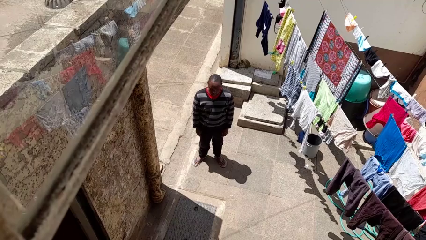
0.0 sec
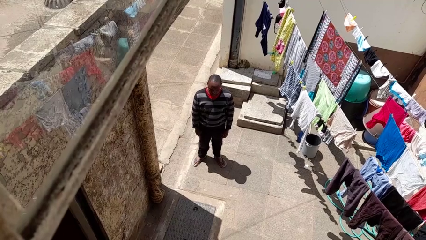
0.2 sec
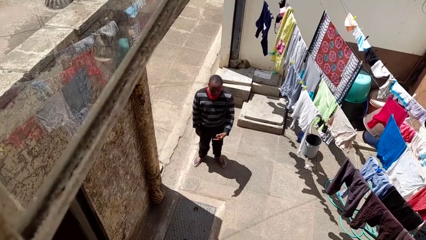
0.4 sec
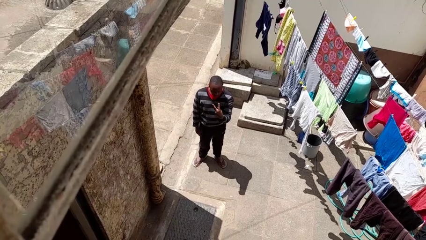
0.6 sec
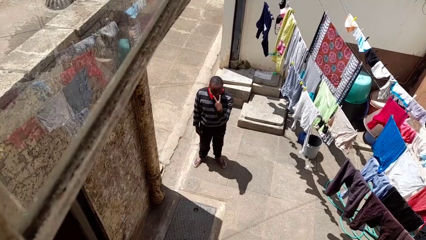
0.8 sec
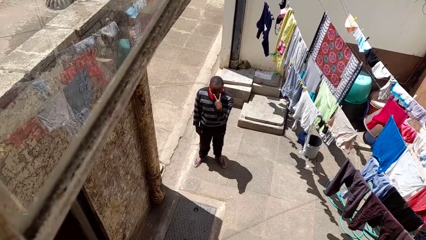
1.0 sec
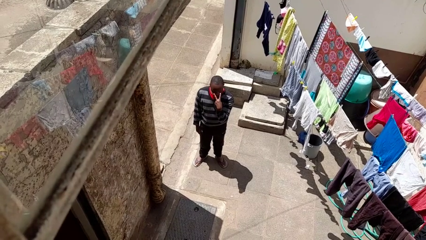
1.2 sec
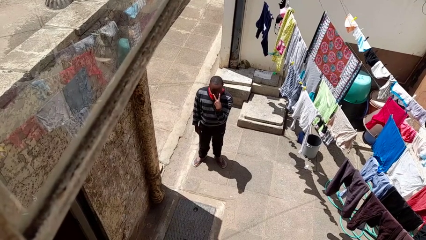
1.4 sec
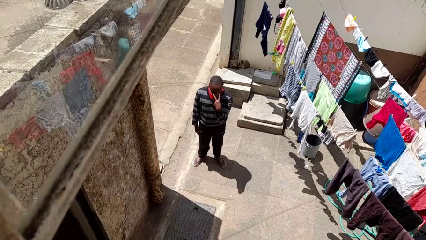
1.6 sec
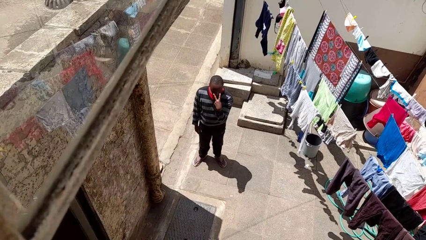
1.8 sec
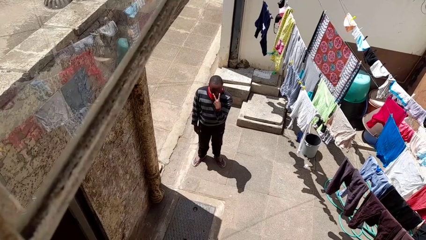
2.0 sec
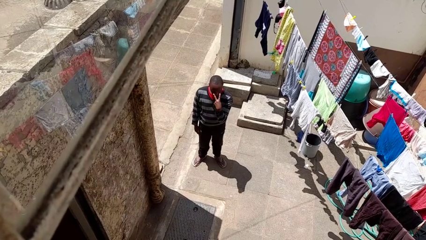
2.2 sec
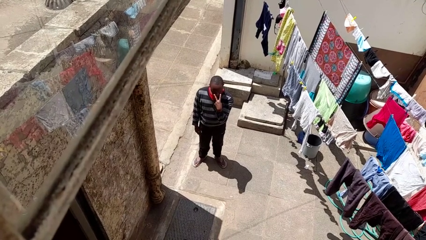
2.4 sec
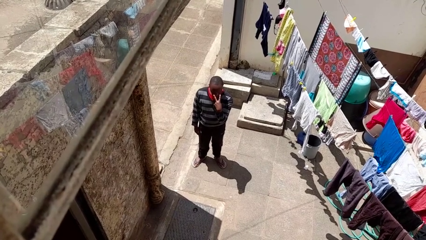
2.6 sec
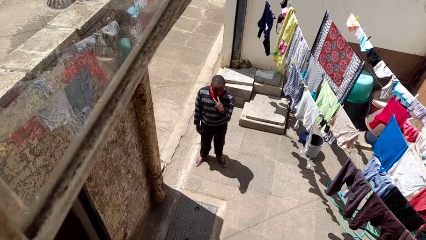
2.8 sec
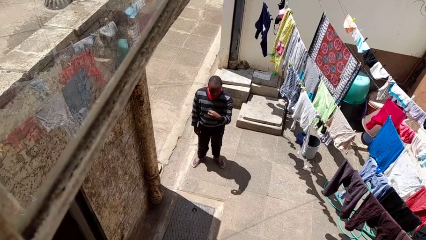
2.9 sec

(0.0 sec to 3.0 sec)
person gestures watch closely

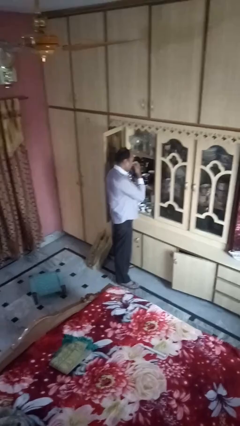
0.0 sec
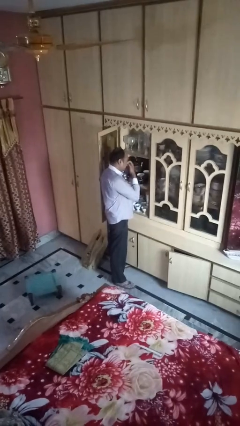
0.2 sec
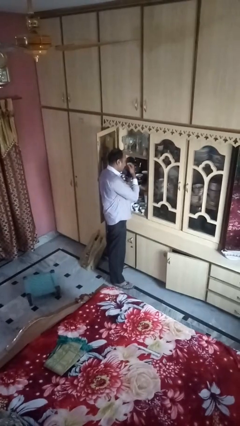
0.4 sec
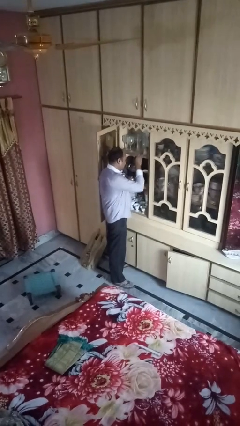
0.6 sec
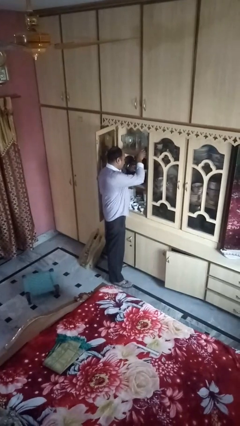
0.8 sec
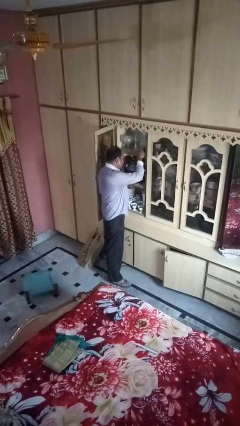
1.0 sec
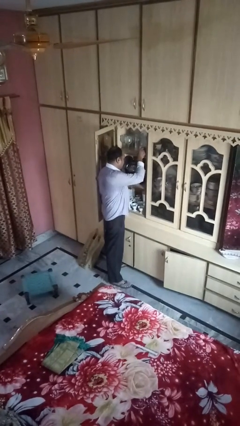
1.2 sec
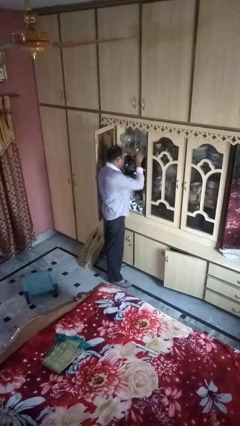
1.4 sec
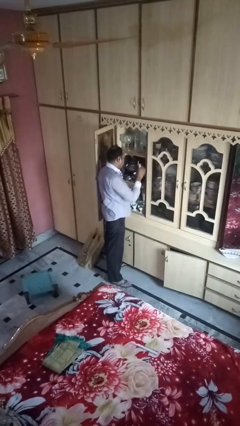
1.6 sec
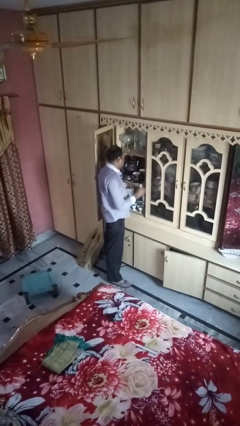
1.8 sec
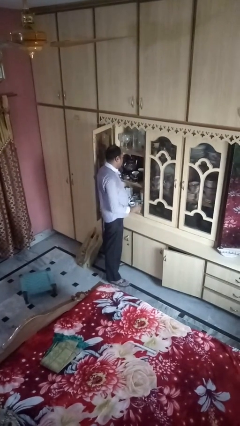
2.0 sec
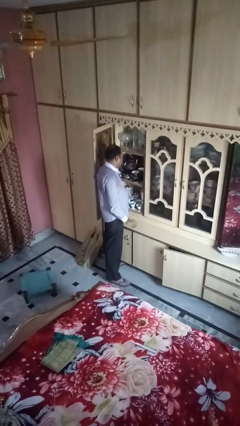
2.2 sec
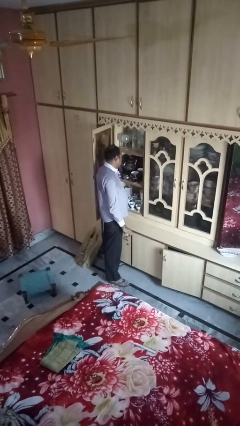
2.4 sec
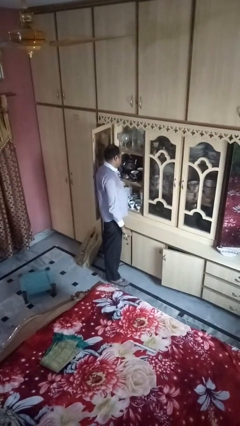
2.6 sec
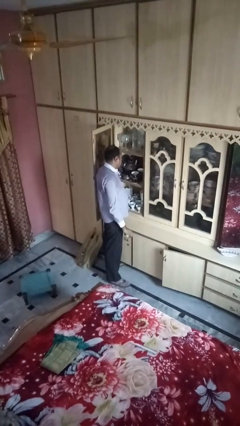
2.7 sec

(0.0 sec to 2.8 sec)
person picks up object from shelf

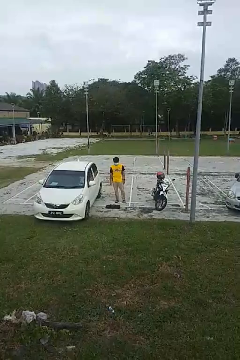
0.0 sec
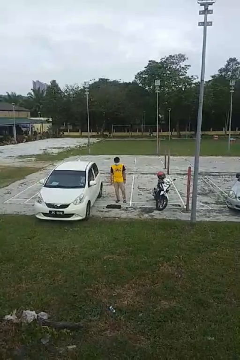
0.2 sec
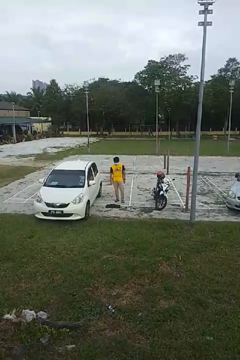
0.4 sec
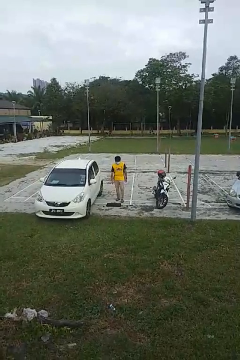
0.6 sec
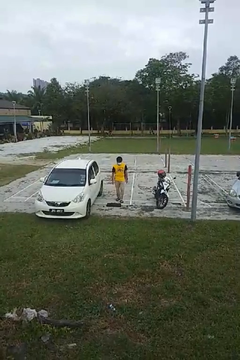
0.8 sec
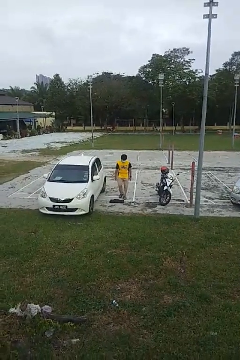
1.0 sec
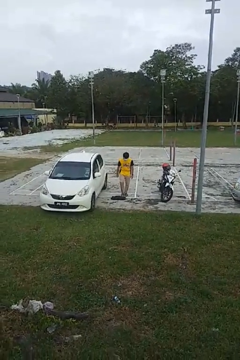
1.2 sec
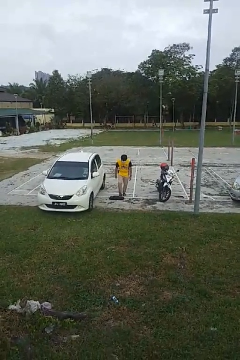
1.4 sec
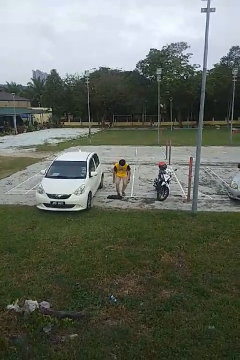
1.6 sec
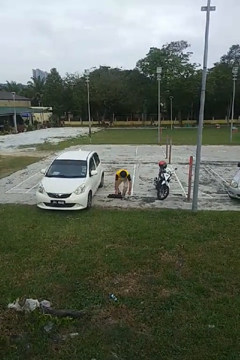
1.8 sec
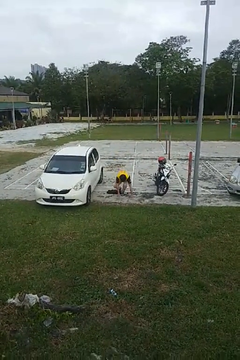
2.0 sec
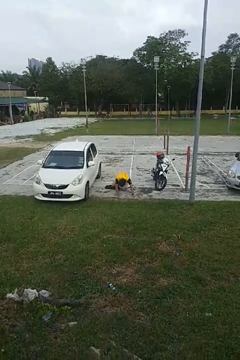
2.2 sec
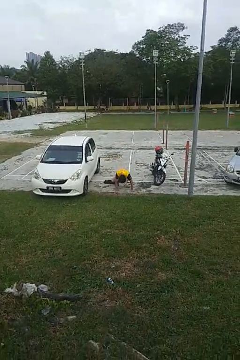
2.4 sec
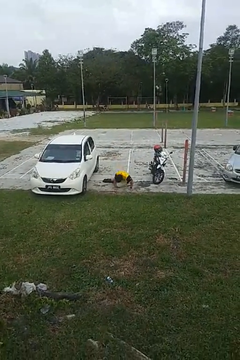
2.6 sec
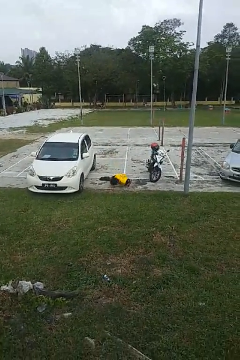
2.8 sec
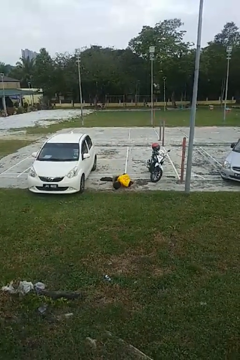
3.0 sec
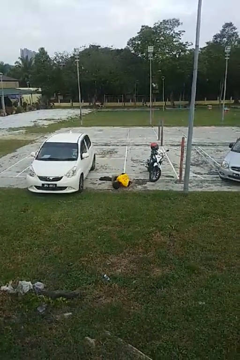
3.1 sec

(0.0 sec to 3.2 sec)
person trips on object on floor

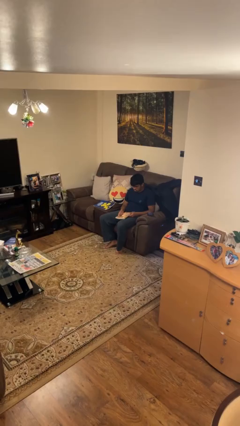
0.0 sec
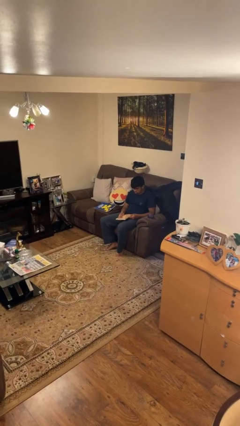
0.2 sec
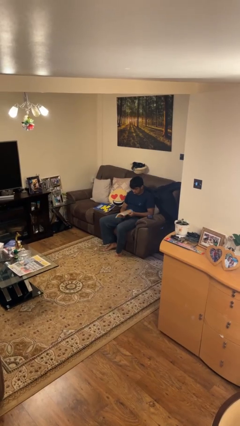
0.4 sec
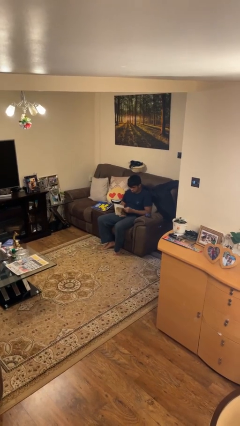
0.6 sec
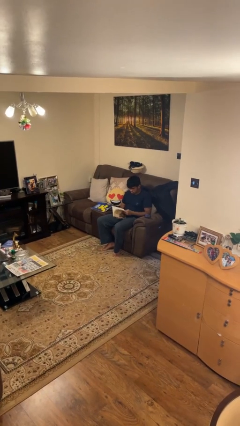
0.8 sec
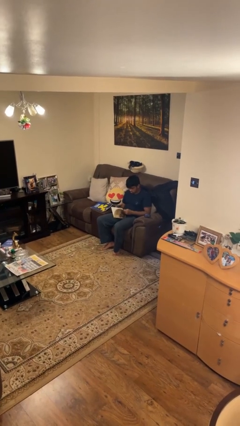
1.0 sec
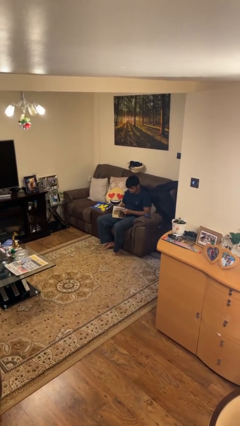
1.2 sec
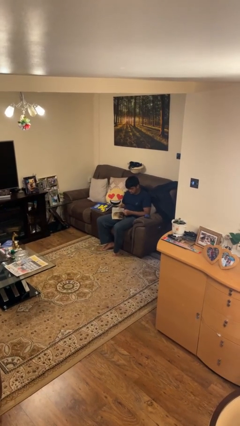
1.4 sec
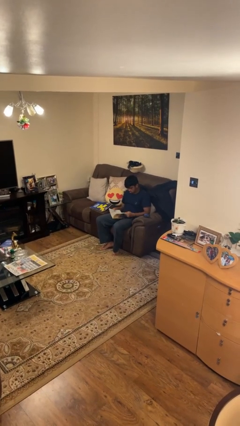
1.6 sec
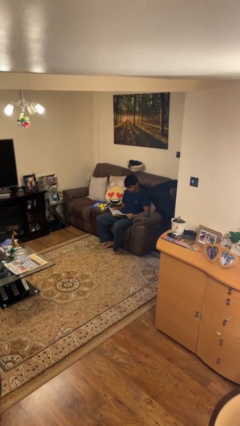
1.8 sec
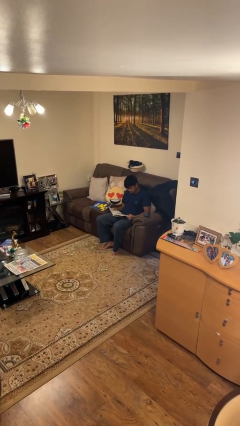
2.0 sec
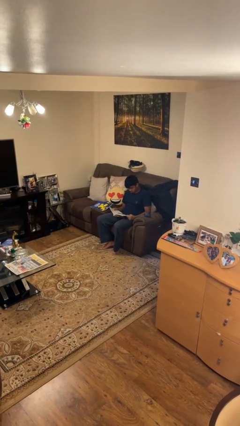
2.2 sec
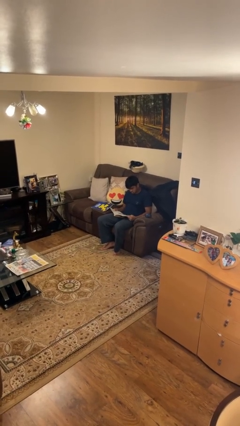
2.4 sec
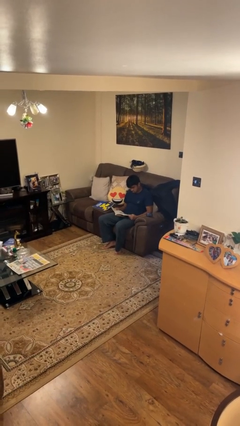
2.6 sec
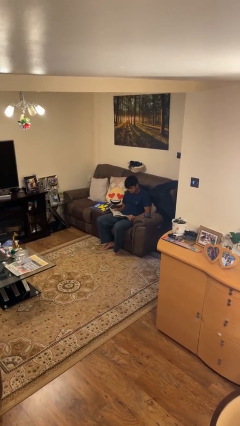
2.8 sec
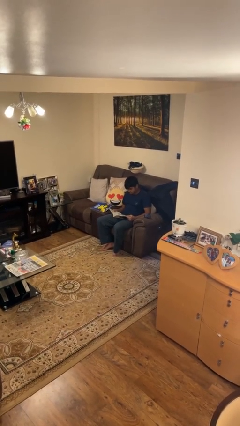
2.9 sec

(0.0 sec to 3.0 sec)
person reads book

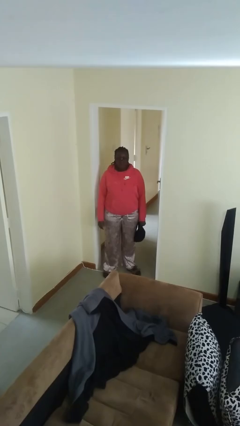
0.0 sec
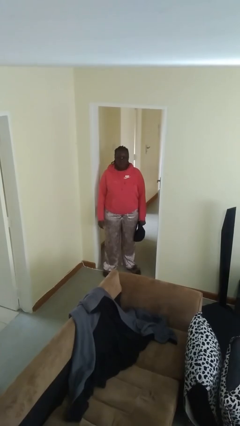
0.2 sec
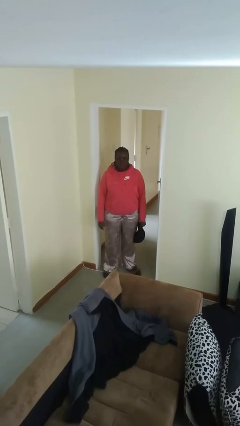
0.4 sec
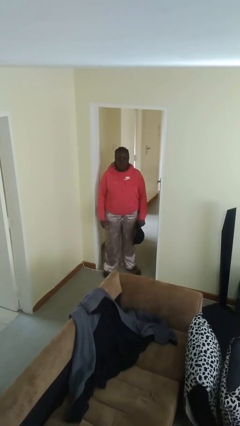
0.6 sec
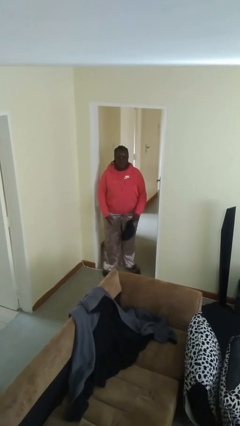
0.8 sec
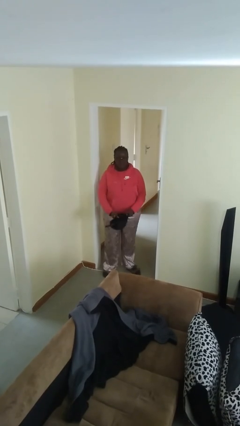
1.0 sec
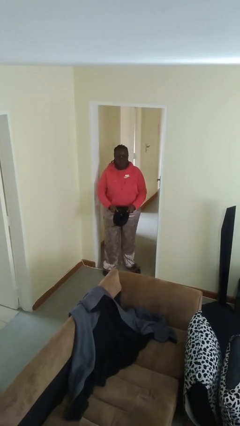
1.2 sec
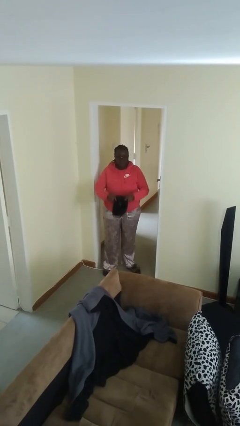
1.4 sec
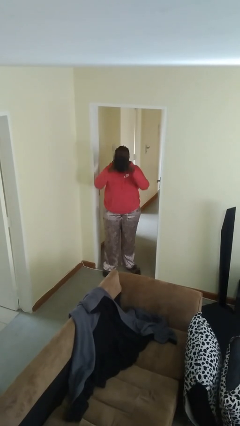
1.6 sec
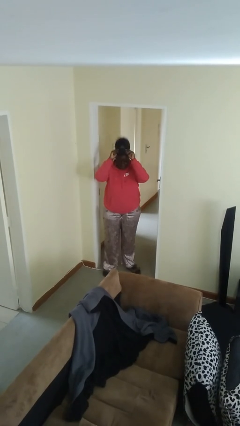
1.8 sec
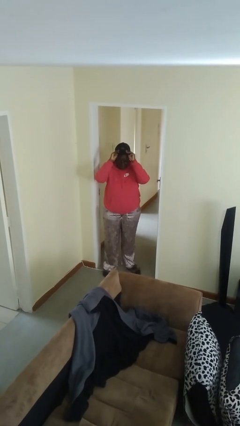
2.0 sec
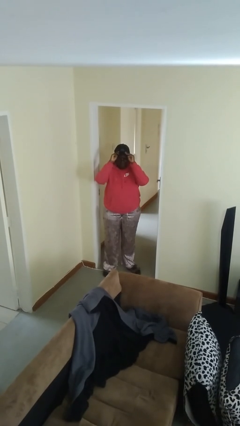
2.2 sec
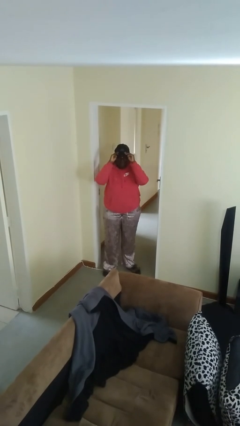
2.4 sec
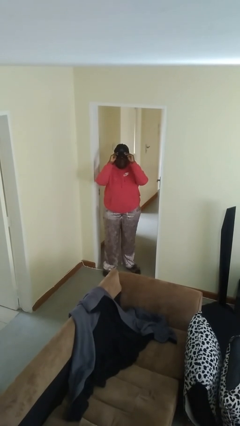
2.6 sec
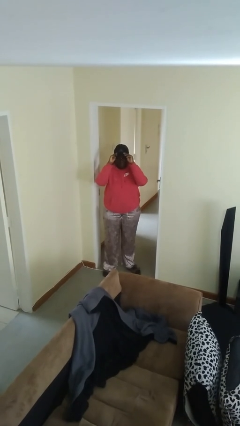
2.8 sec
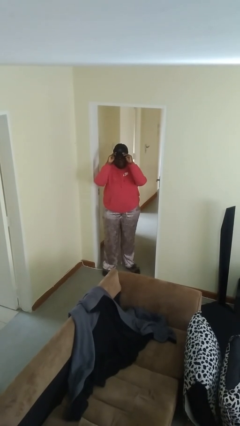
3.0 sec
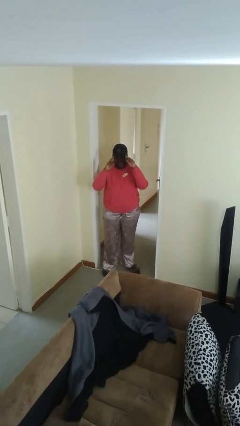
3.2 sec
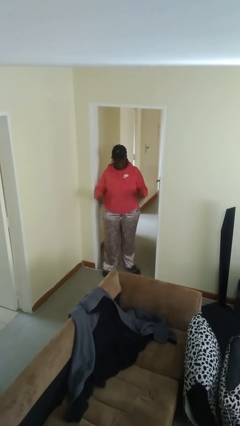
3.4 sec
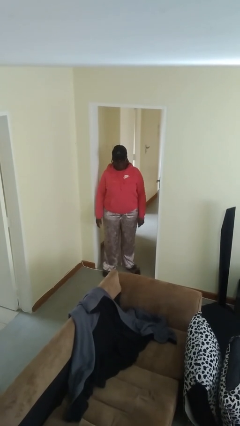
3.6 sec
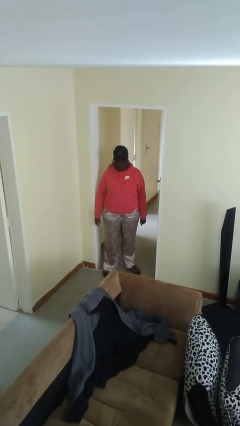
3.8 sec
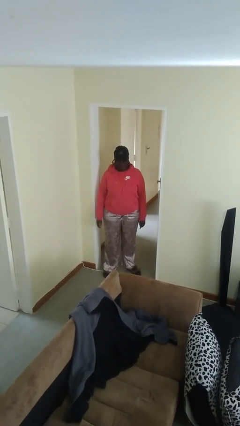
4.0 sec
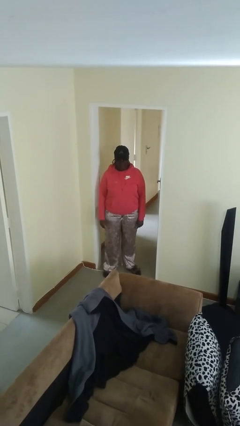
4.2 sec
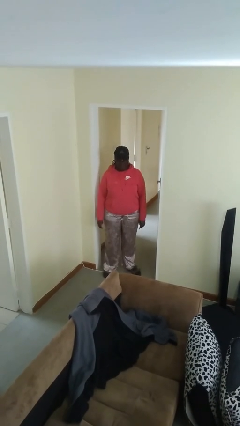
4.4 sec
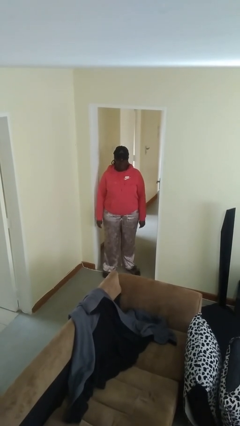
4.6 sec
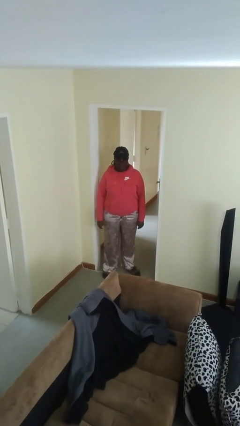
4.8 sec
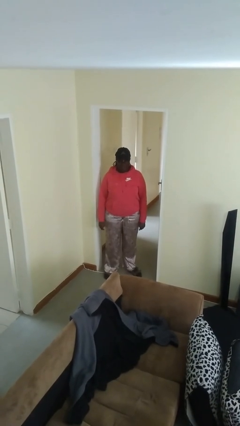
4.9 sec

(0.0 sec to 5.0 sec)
person puts on hat

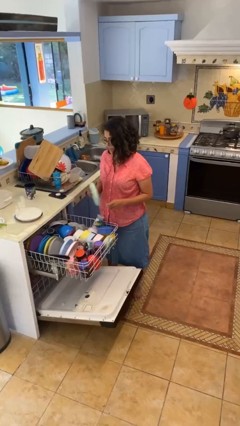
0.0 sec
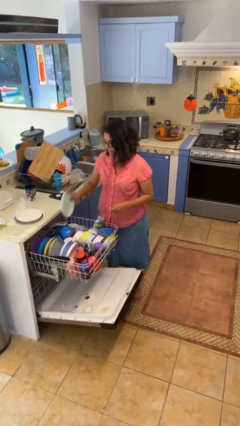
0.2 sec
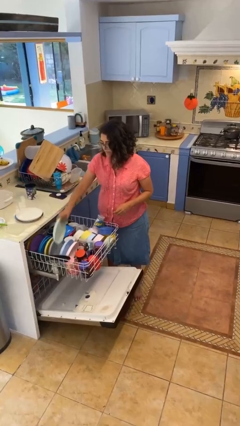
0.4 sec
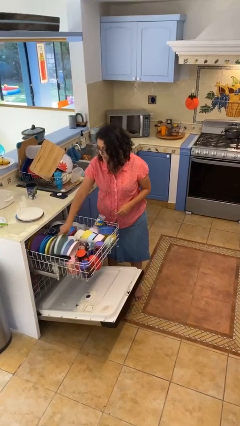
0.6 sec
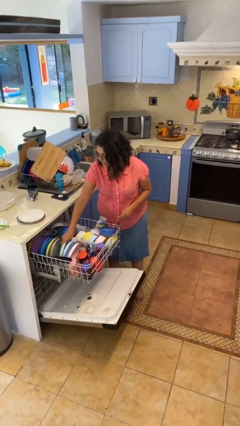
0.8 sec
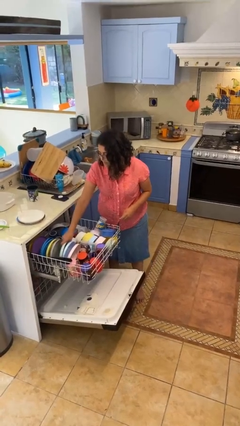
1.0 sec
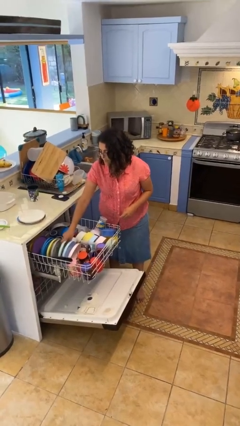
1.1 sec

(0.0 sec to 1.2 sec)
person loads dishwasher
